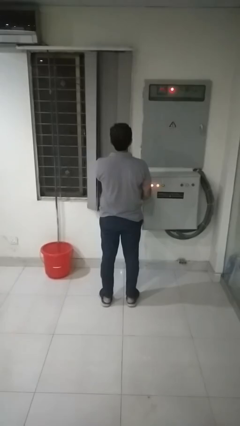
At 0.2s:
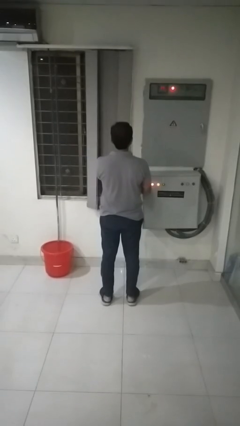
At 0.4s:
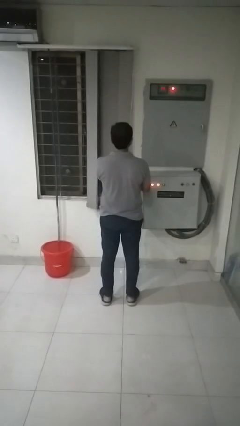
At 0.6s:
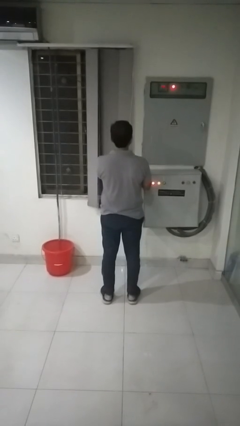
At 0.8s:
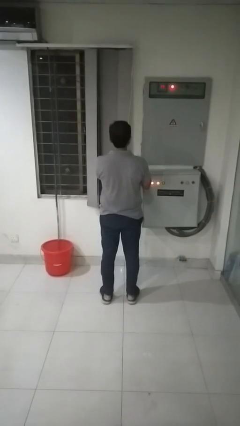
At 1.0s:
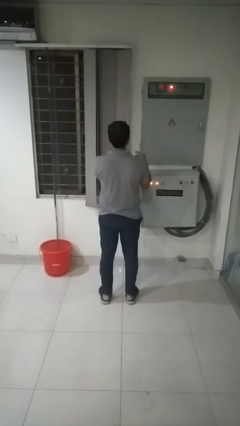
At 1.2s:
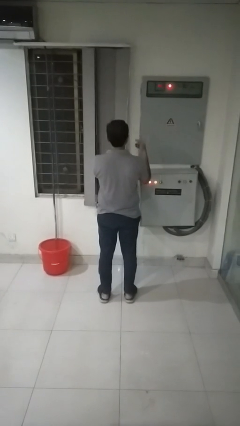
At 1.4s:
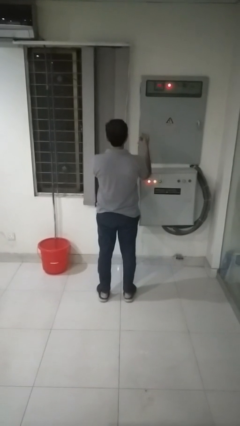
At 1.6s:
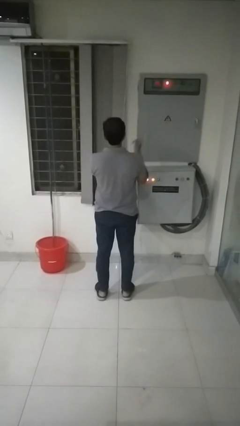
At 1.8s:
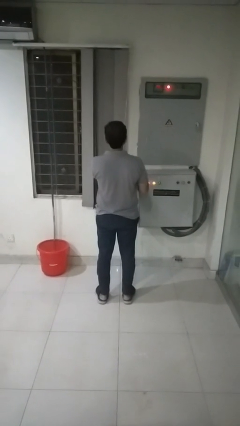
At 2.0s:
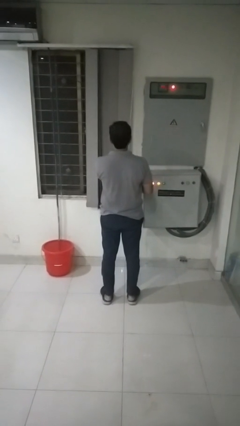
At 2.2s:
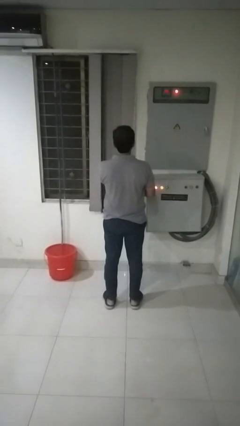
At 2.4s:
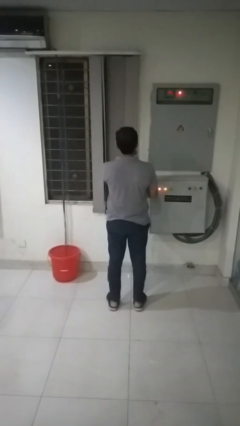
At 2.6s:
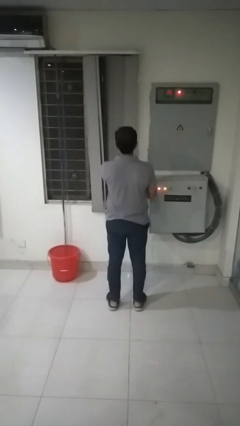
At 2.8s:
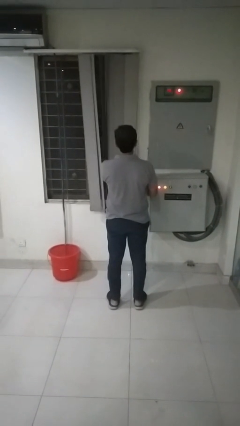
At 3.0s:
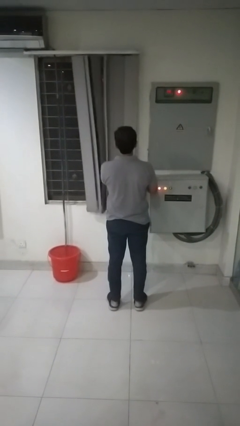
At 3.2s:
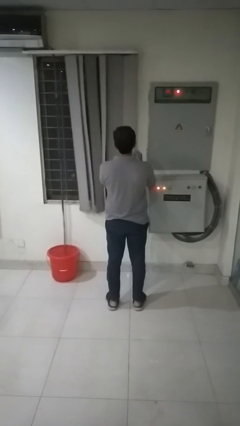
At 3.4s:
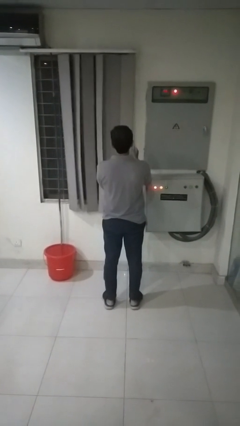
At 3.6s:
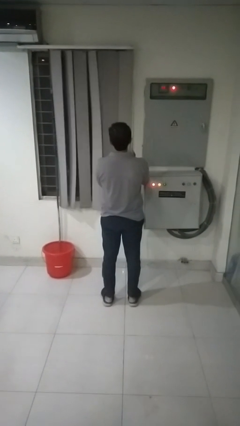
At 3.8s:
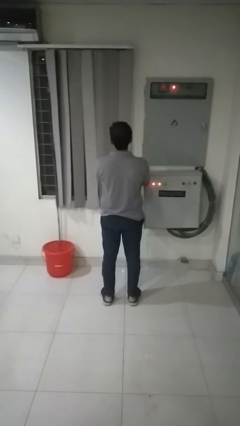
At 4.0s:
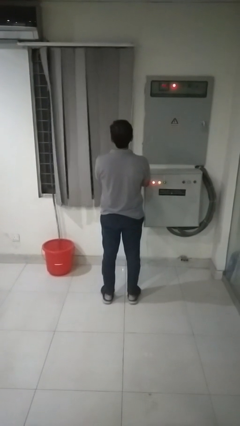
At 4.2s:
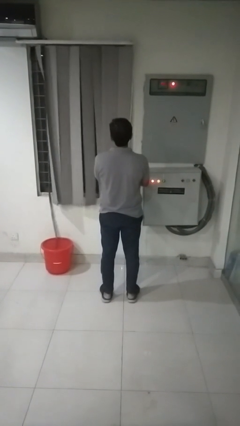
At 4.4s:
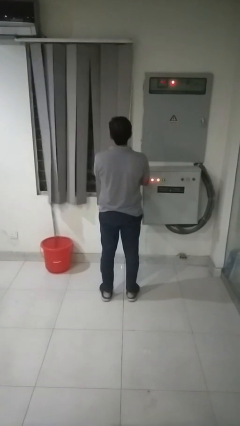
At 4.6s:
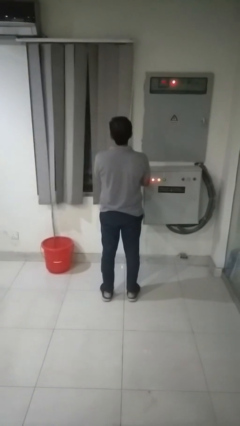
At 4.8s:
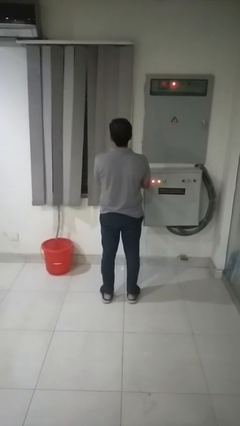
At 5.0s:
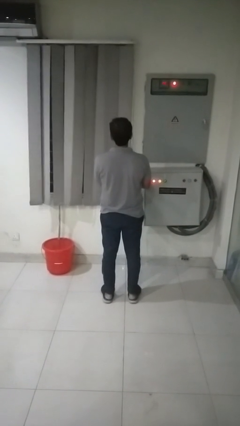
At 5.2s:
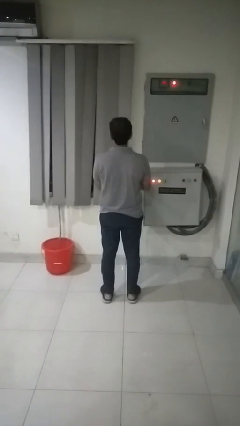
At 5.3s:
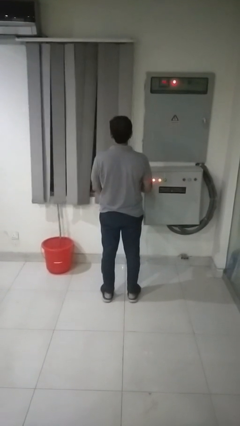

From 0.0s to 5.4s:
person closes curtains

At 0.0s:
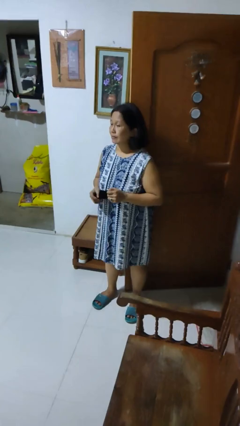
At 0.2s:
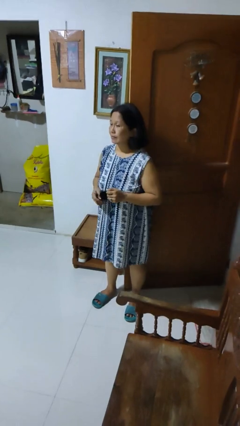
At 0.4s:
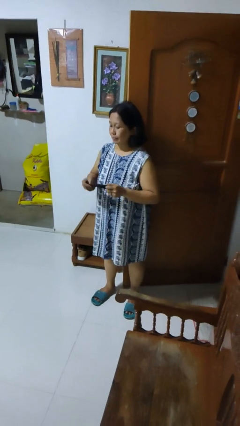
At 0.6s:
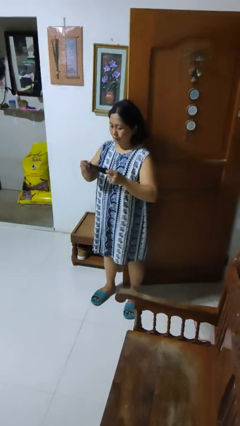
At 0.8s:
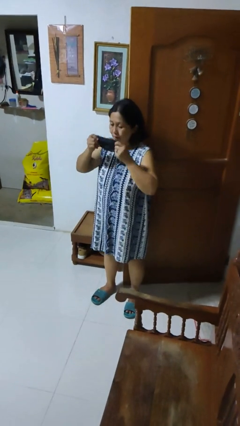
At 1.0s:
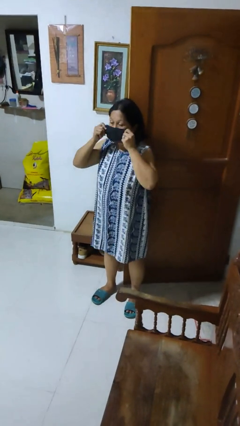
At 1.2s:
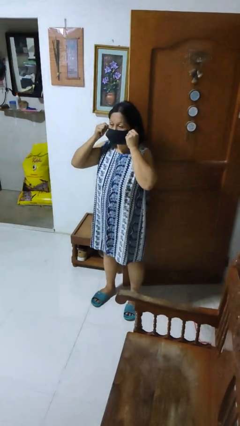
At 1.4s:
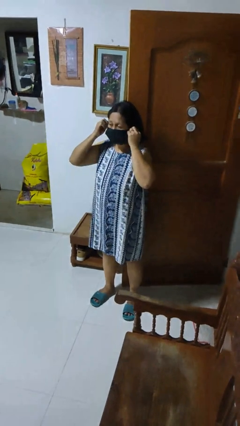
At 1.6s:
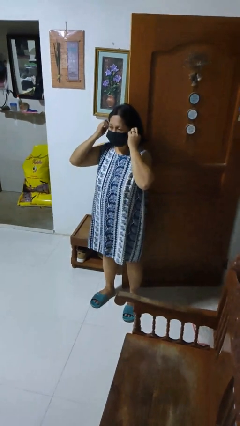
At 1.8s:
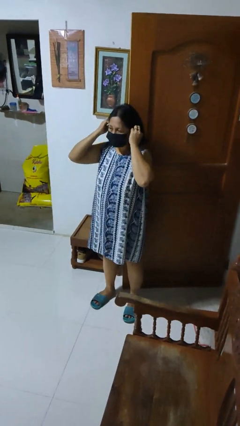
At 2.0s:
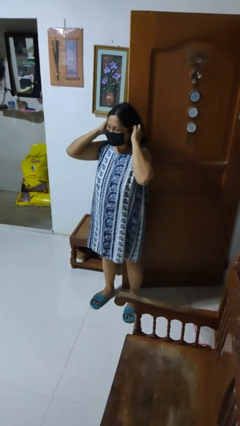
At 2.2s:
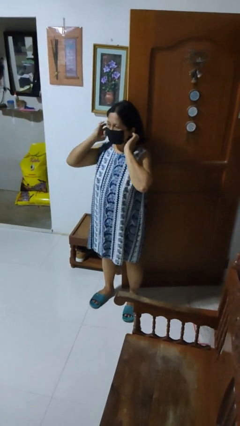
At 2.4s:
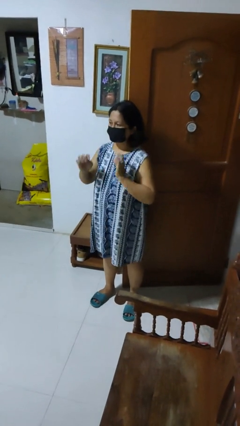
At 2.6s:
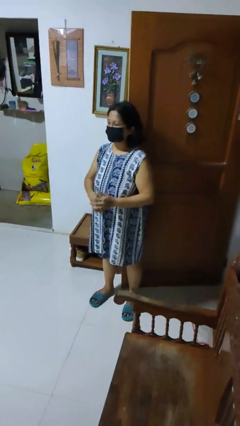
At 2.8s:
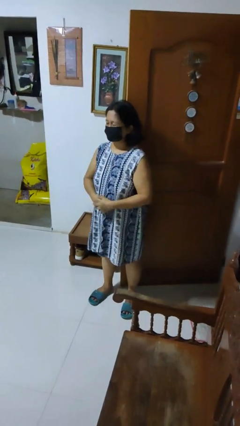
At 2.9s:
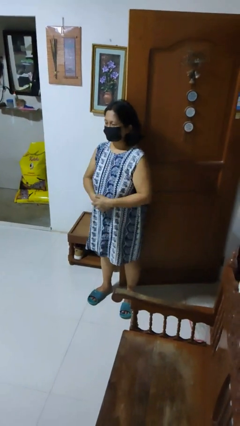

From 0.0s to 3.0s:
person puts on facemask

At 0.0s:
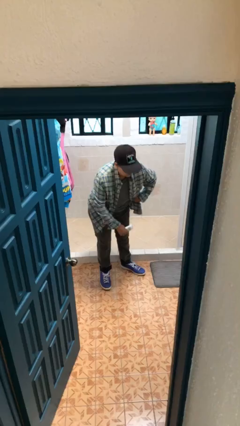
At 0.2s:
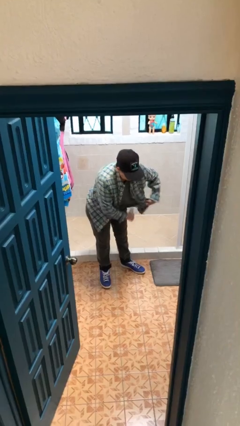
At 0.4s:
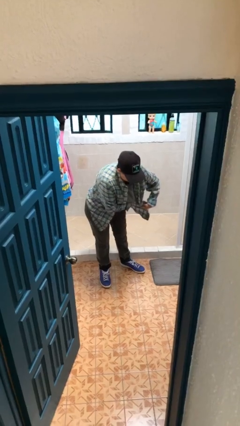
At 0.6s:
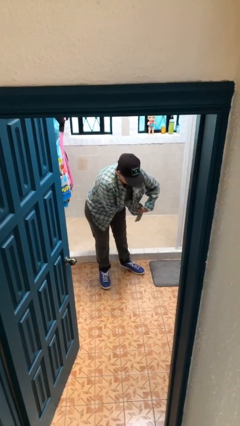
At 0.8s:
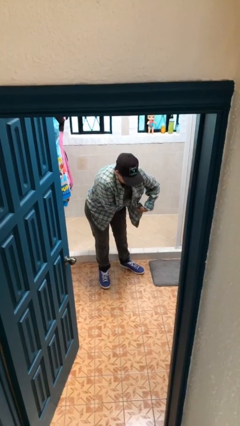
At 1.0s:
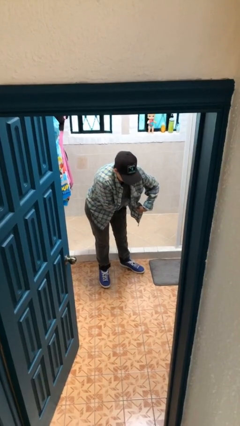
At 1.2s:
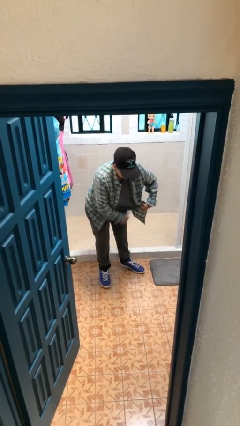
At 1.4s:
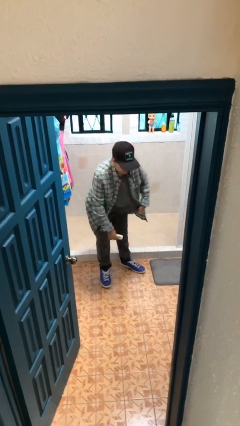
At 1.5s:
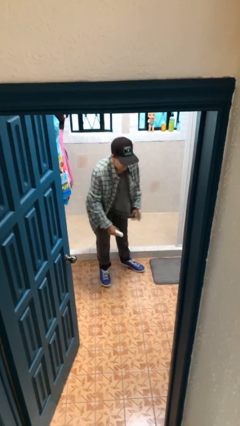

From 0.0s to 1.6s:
person applies deodorant

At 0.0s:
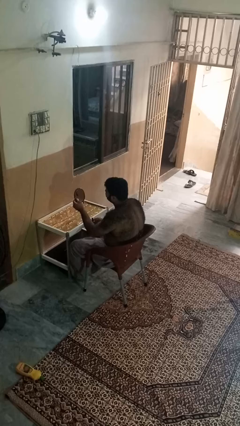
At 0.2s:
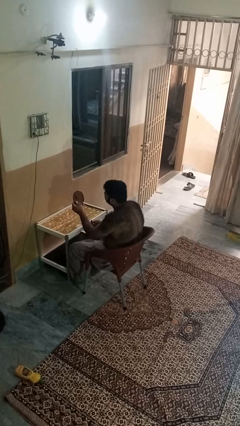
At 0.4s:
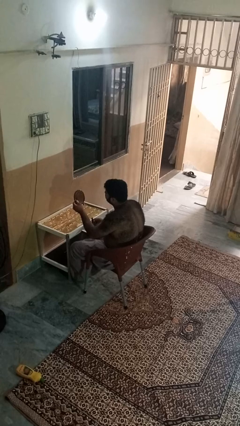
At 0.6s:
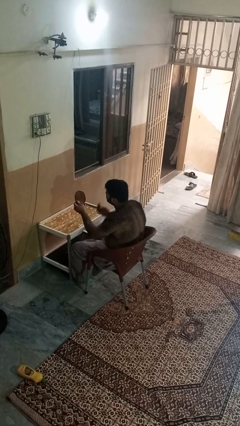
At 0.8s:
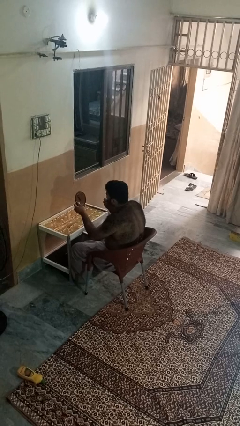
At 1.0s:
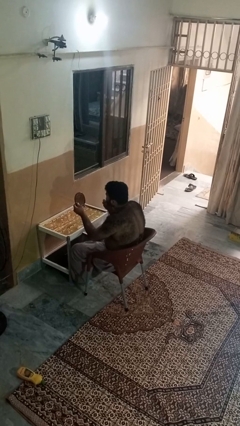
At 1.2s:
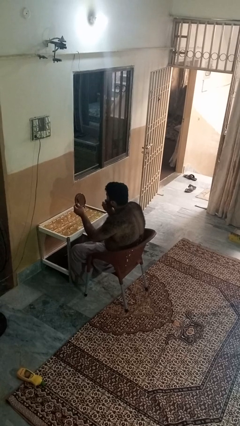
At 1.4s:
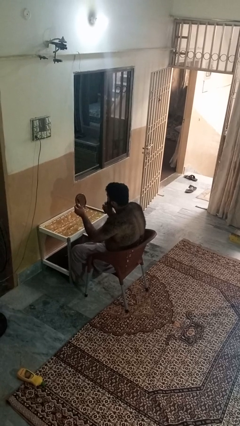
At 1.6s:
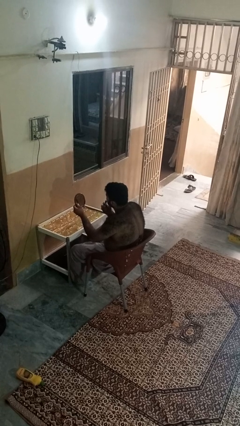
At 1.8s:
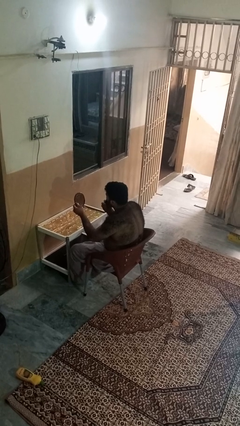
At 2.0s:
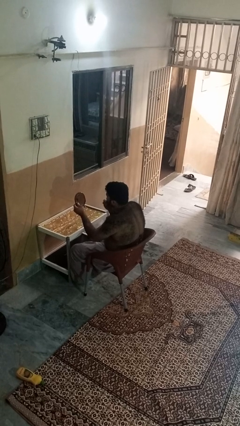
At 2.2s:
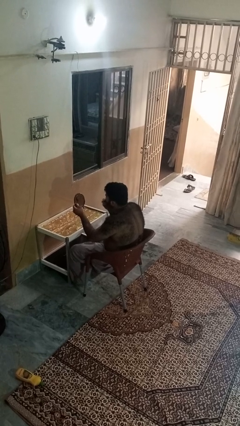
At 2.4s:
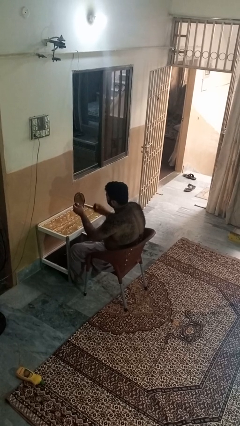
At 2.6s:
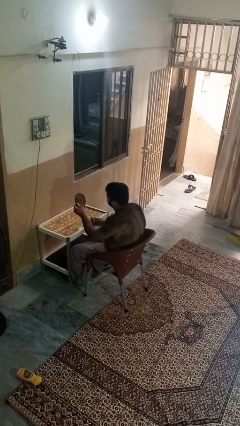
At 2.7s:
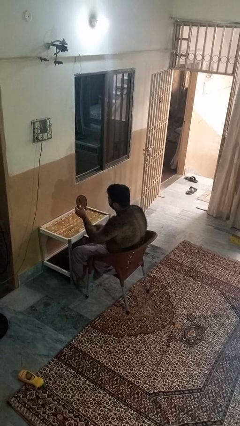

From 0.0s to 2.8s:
person applies lip makeup

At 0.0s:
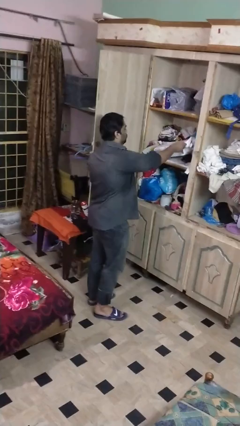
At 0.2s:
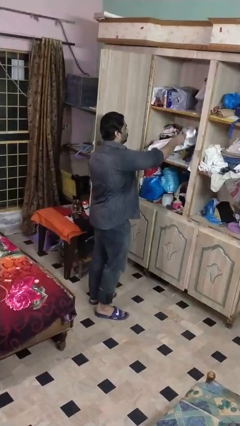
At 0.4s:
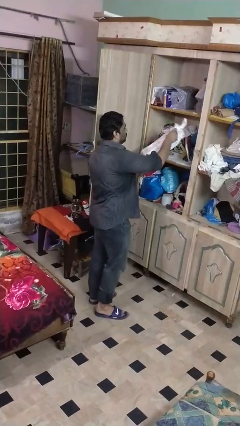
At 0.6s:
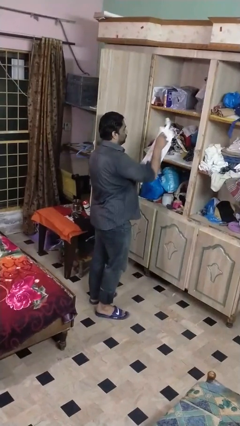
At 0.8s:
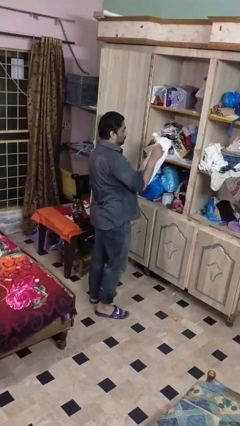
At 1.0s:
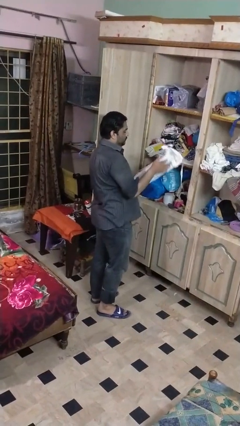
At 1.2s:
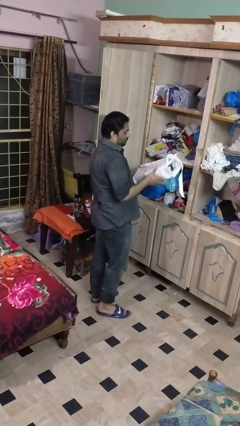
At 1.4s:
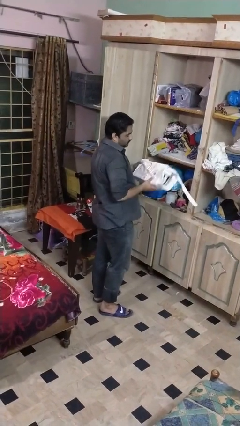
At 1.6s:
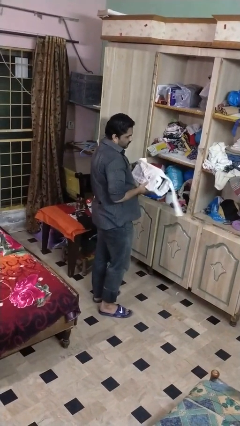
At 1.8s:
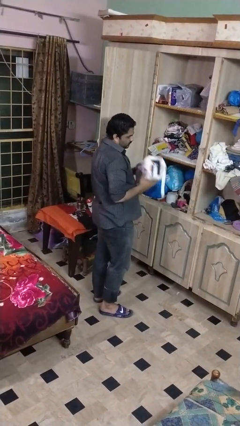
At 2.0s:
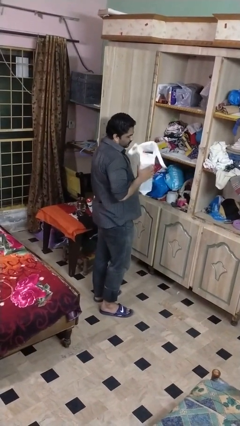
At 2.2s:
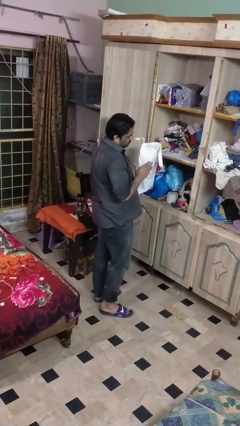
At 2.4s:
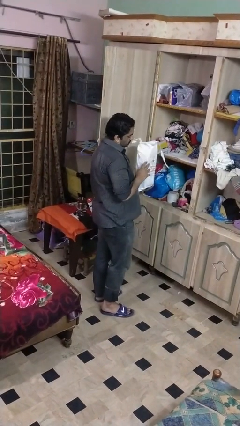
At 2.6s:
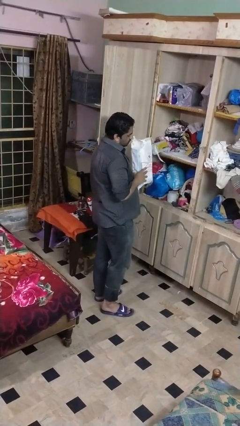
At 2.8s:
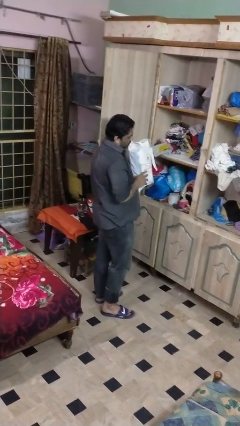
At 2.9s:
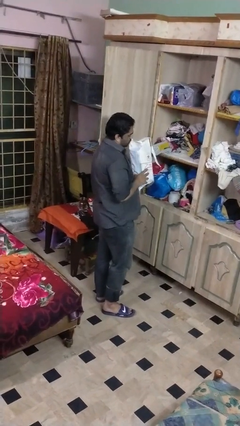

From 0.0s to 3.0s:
person picks up object from cabinet

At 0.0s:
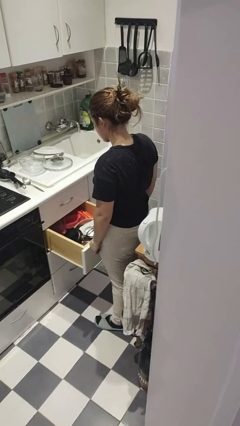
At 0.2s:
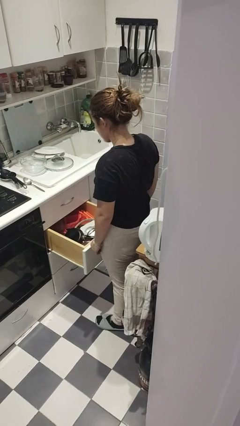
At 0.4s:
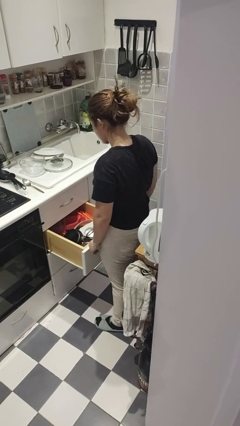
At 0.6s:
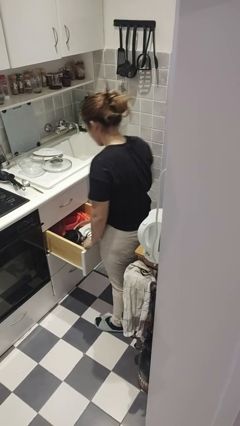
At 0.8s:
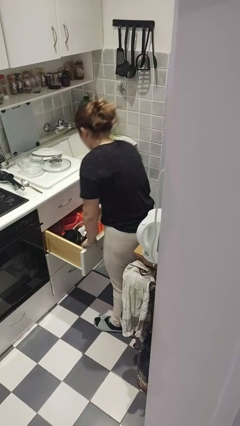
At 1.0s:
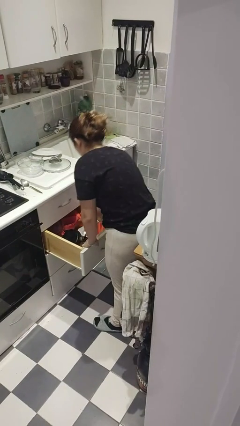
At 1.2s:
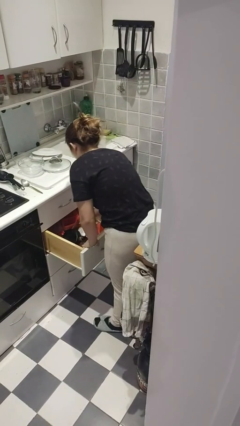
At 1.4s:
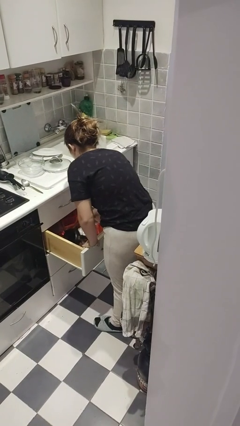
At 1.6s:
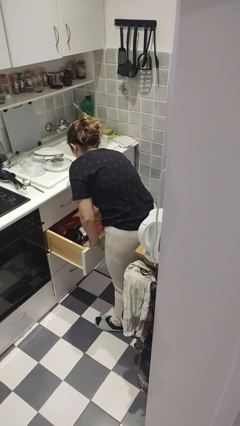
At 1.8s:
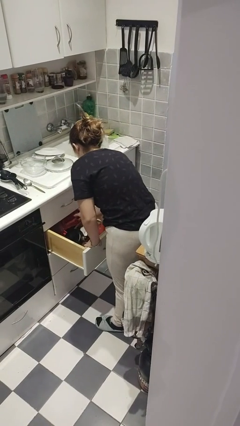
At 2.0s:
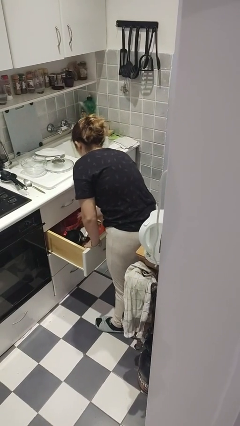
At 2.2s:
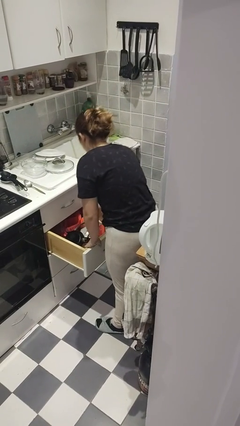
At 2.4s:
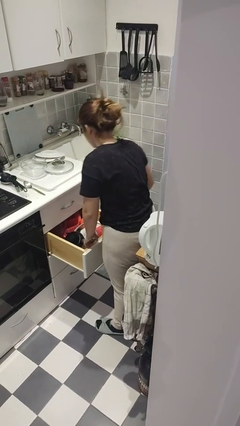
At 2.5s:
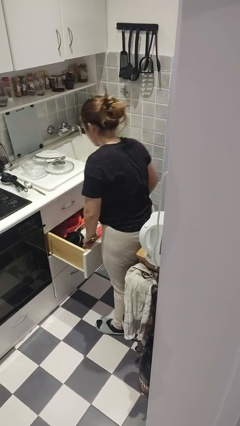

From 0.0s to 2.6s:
person searches in kitchen drawer
